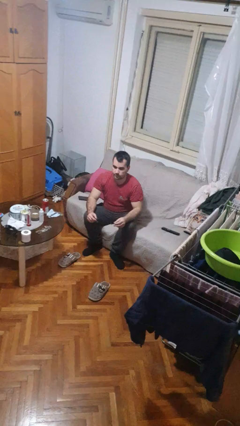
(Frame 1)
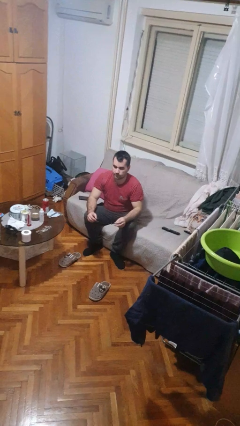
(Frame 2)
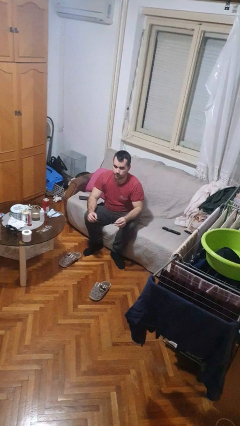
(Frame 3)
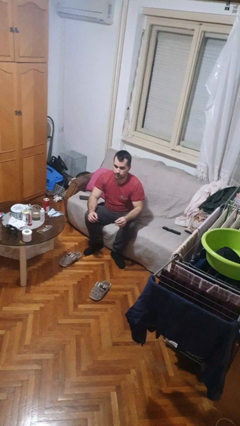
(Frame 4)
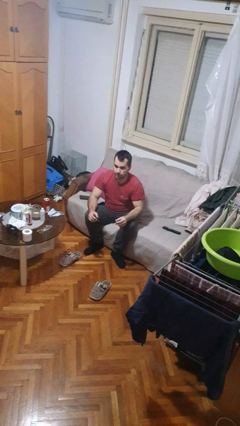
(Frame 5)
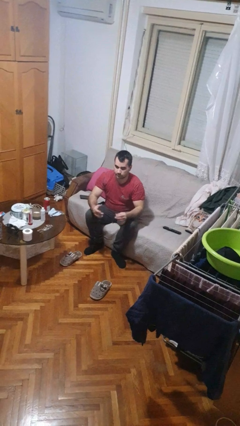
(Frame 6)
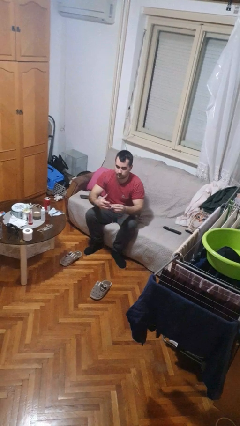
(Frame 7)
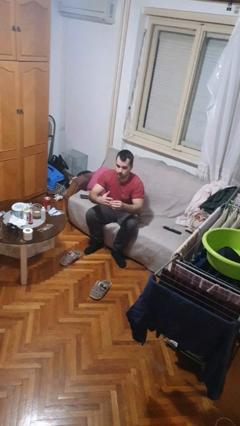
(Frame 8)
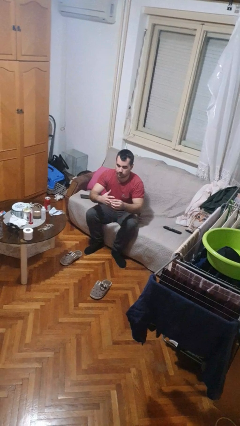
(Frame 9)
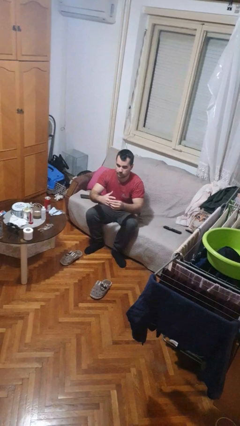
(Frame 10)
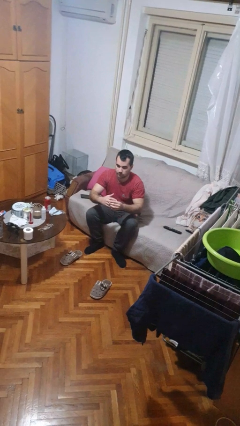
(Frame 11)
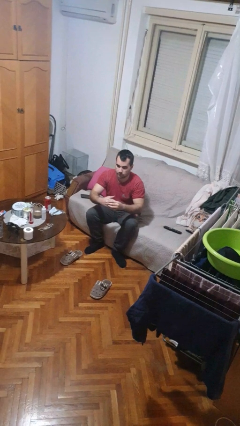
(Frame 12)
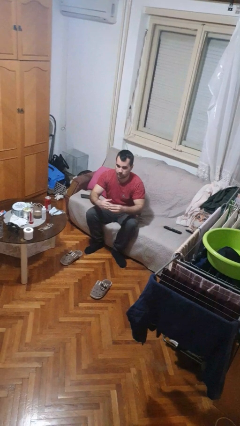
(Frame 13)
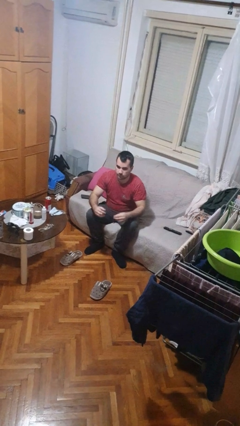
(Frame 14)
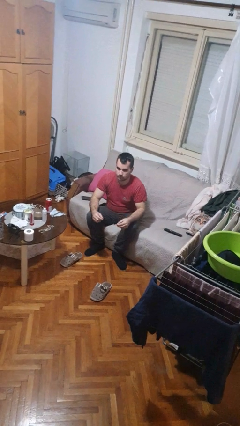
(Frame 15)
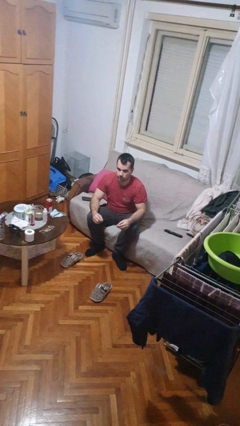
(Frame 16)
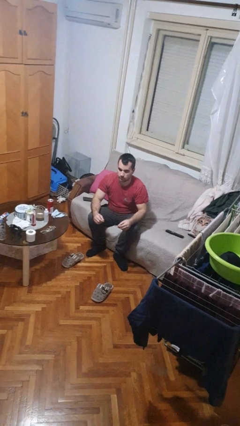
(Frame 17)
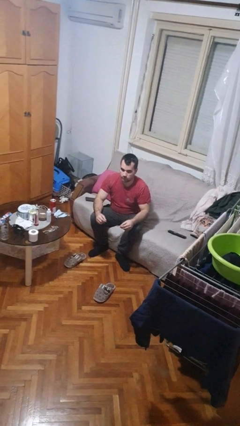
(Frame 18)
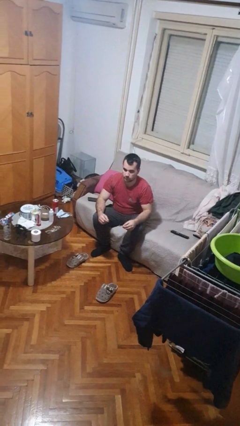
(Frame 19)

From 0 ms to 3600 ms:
person puts on ring

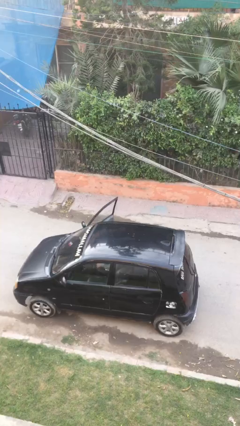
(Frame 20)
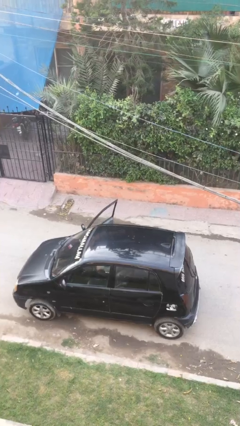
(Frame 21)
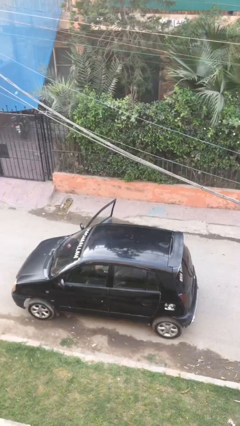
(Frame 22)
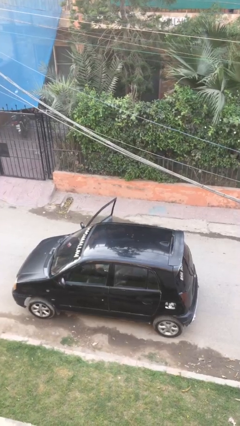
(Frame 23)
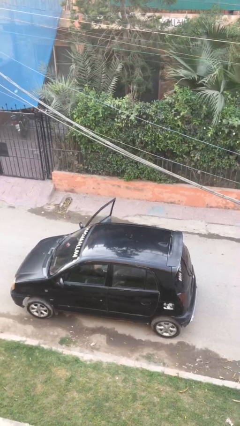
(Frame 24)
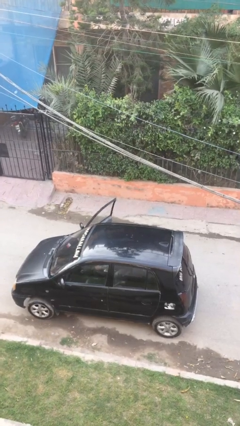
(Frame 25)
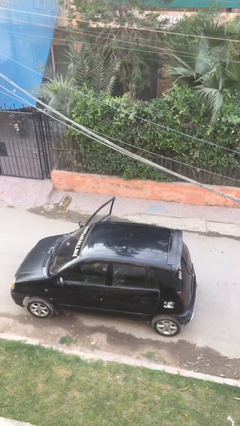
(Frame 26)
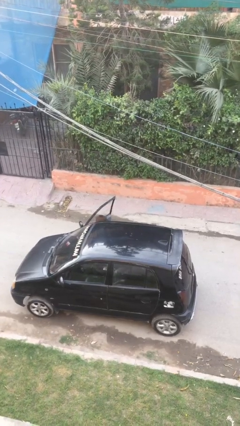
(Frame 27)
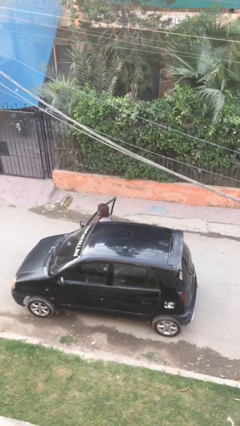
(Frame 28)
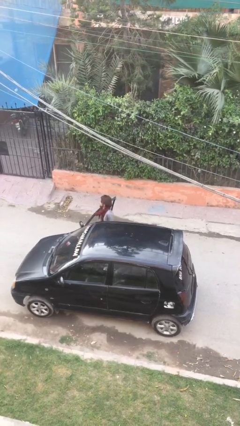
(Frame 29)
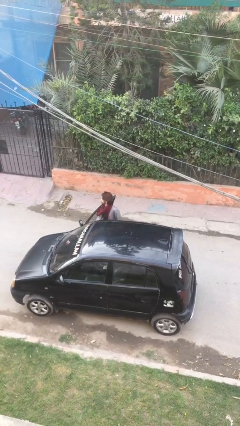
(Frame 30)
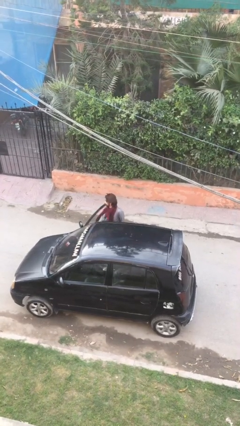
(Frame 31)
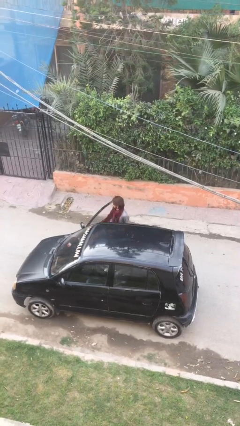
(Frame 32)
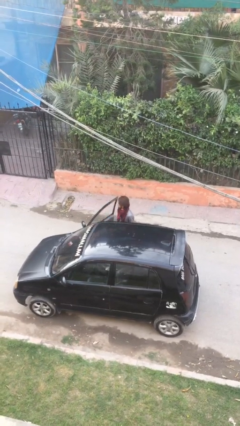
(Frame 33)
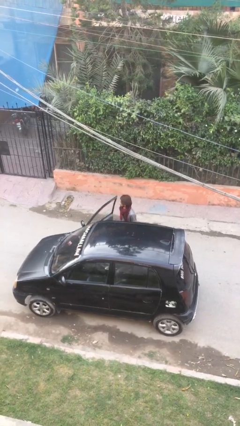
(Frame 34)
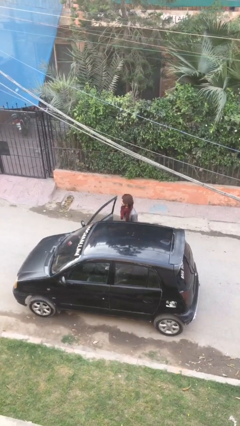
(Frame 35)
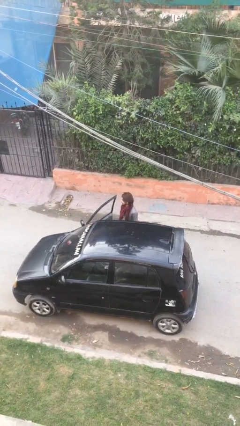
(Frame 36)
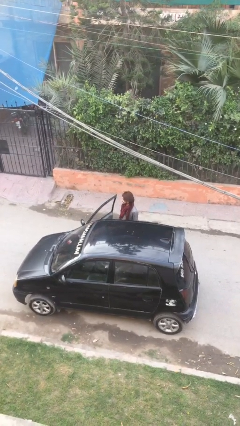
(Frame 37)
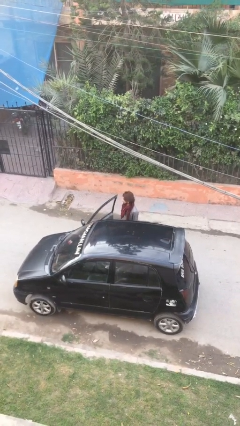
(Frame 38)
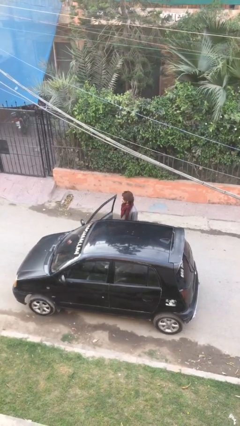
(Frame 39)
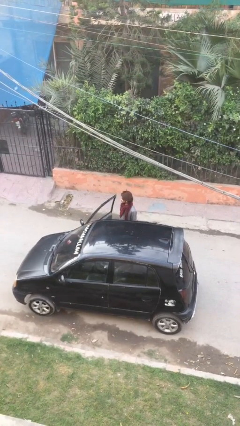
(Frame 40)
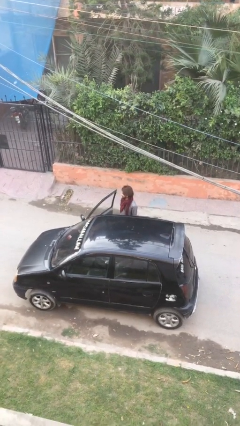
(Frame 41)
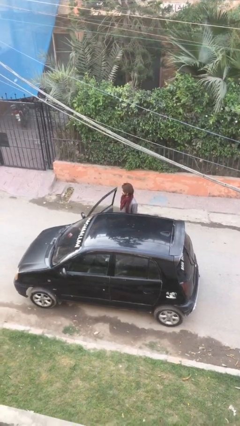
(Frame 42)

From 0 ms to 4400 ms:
person exits car

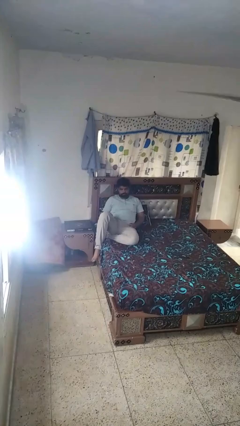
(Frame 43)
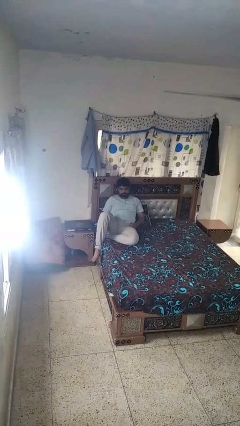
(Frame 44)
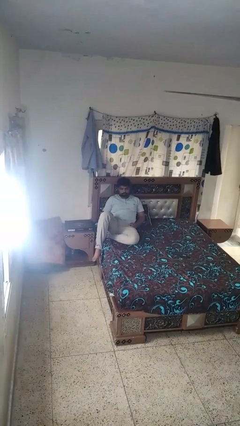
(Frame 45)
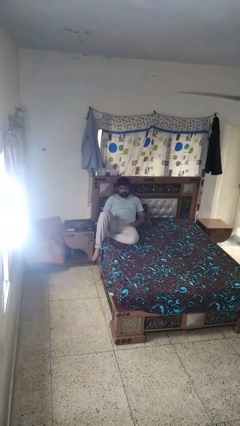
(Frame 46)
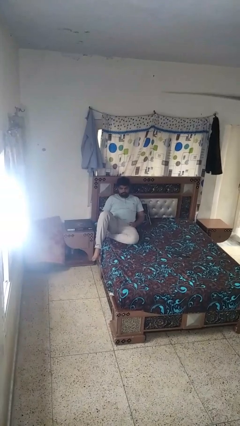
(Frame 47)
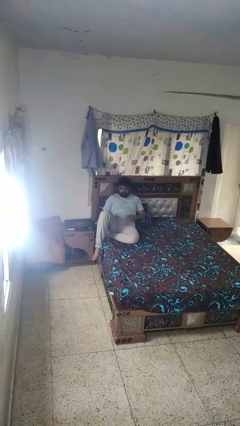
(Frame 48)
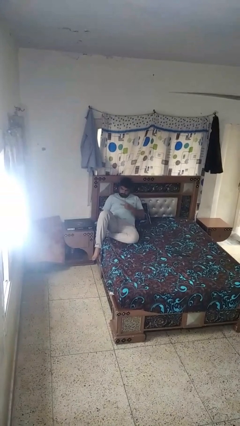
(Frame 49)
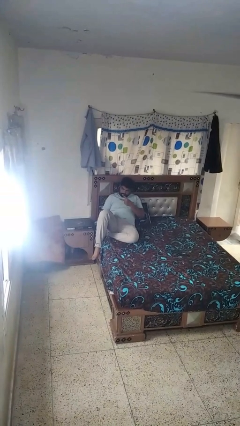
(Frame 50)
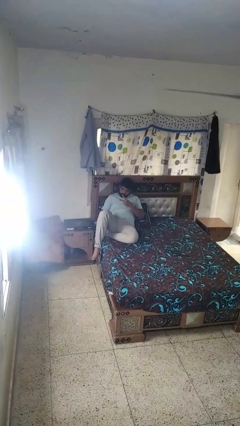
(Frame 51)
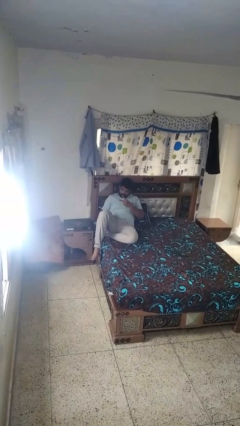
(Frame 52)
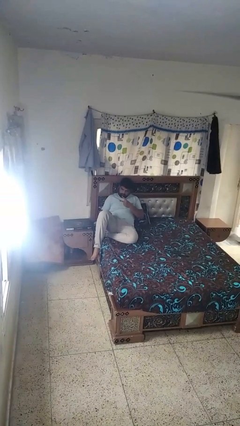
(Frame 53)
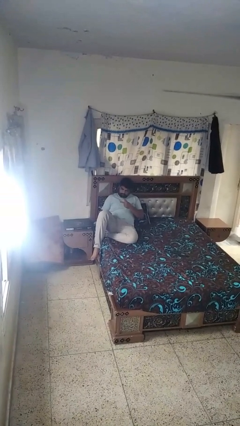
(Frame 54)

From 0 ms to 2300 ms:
person gestures peace

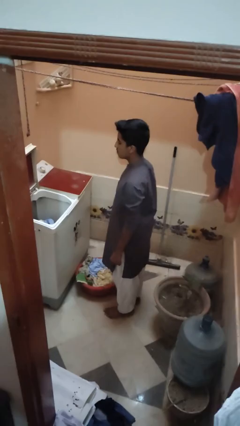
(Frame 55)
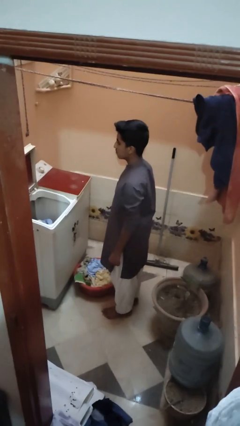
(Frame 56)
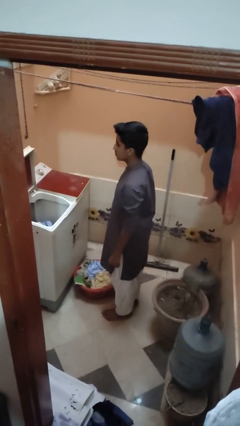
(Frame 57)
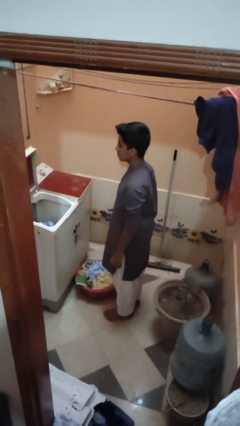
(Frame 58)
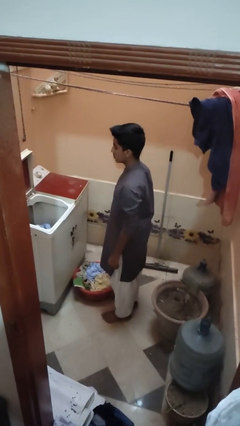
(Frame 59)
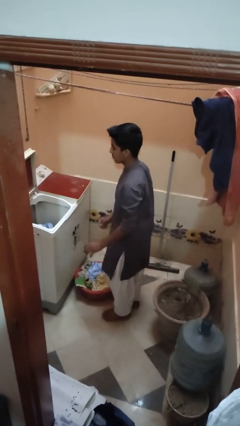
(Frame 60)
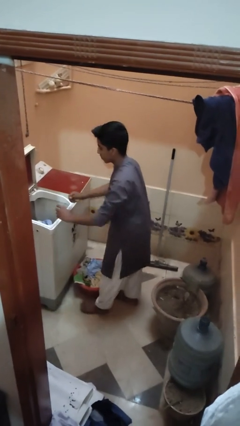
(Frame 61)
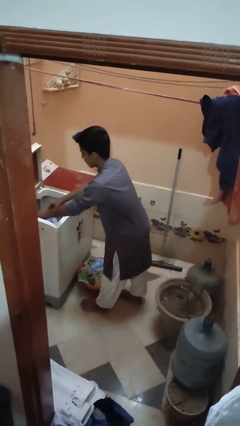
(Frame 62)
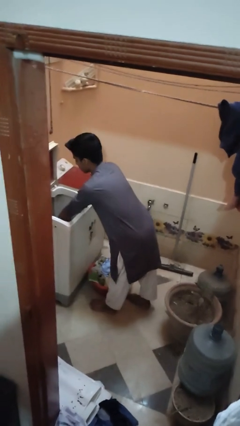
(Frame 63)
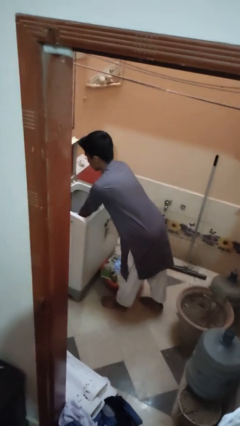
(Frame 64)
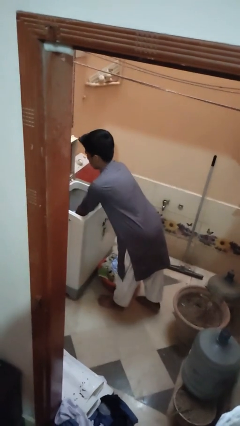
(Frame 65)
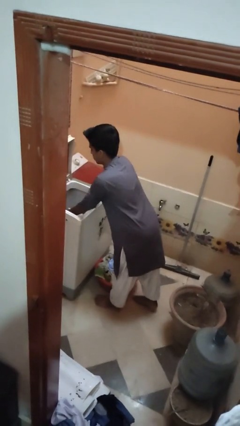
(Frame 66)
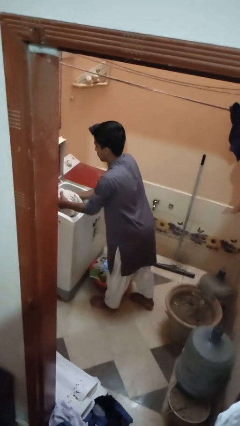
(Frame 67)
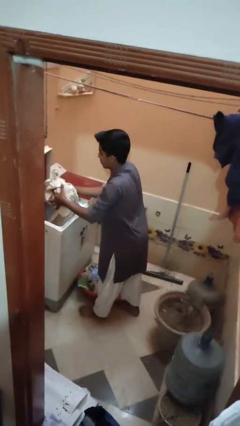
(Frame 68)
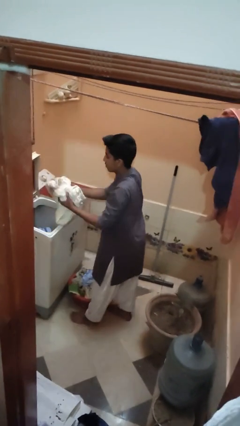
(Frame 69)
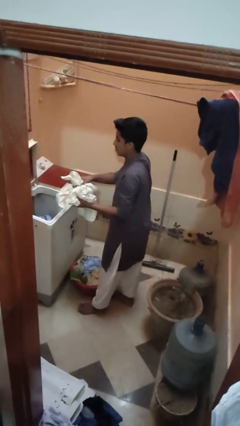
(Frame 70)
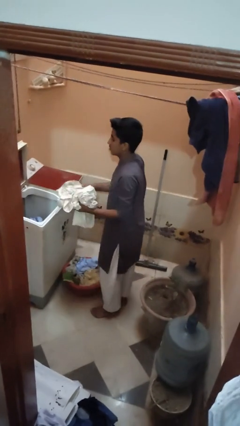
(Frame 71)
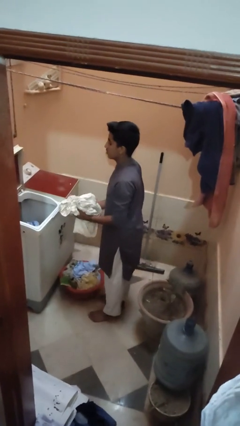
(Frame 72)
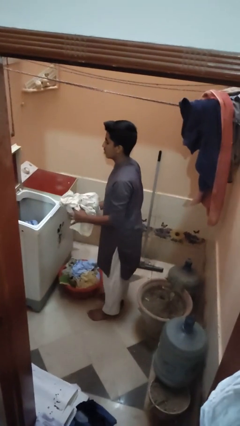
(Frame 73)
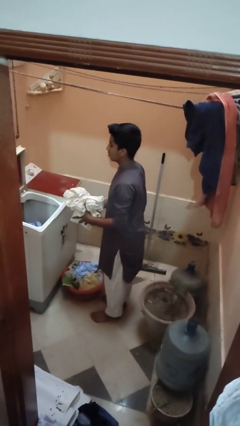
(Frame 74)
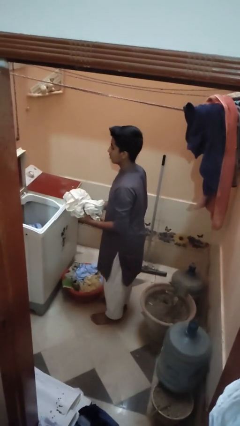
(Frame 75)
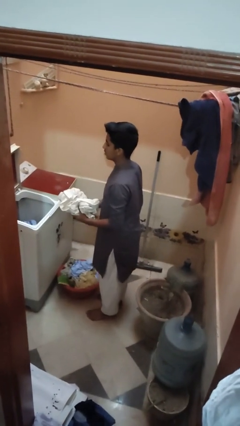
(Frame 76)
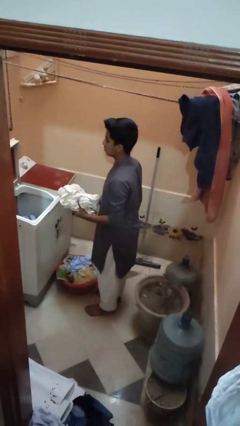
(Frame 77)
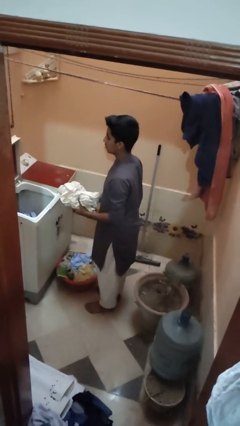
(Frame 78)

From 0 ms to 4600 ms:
person unloads clotheswasher

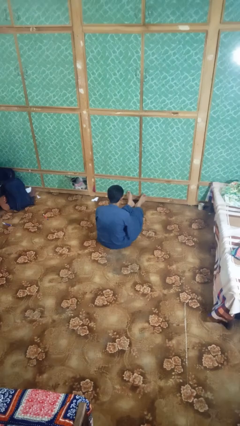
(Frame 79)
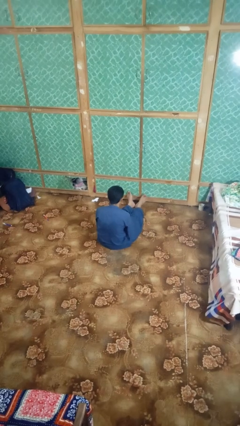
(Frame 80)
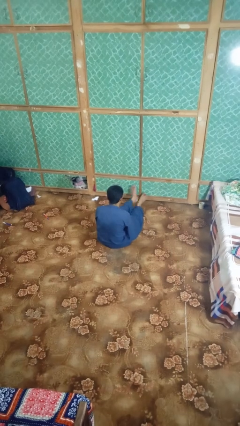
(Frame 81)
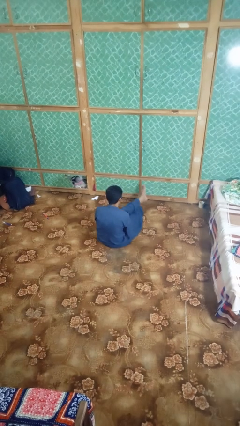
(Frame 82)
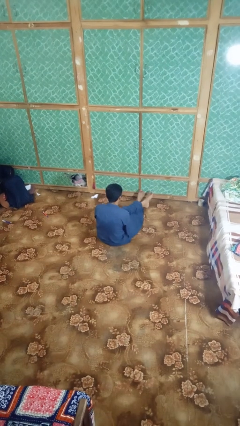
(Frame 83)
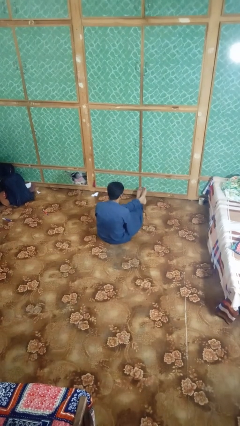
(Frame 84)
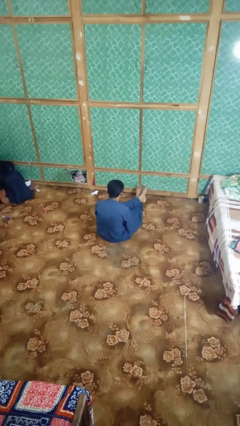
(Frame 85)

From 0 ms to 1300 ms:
person crosses legs

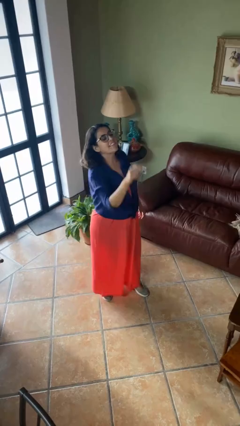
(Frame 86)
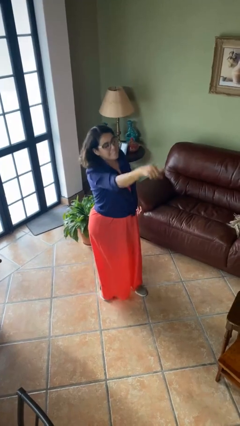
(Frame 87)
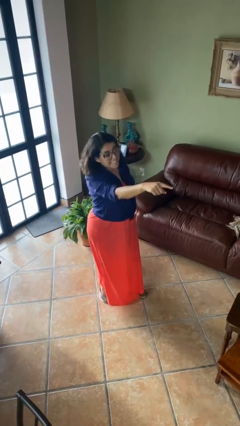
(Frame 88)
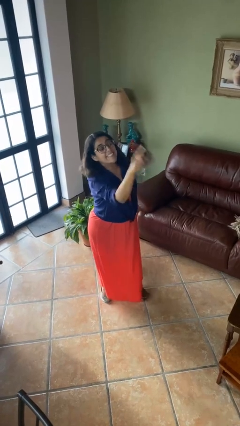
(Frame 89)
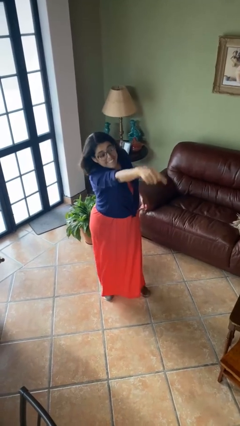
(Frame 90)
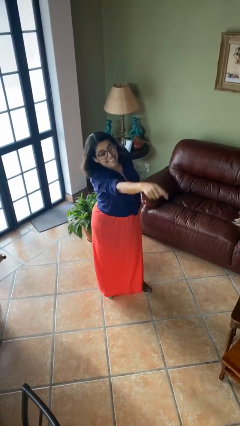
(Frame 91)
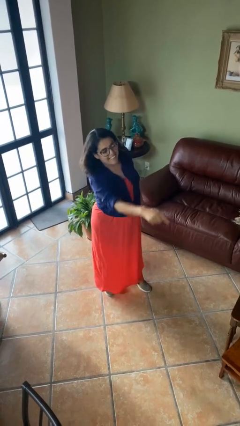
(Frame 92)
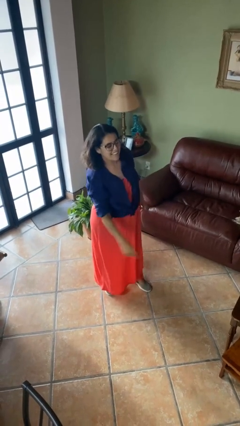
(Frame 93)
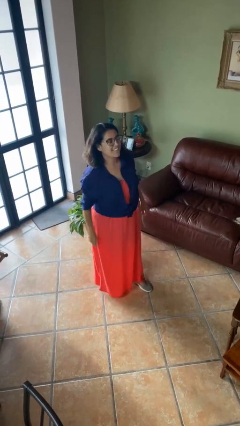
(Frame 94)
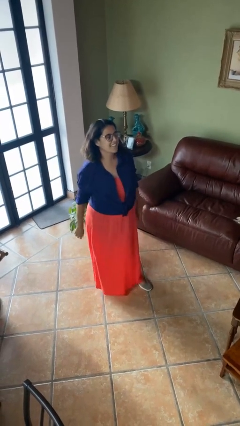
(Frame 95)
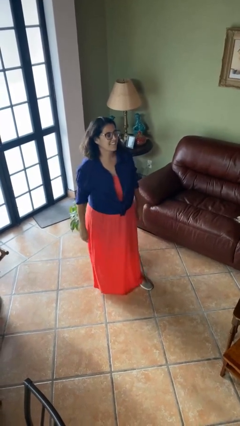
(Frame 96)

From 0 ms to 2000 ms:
person points at person
